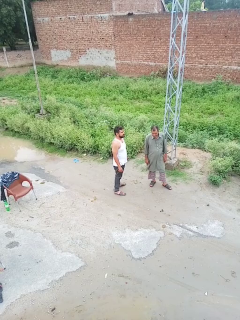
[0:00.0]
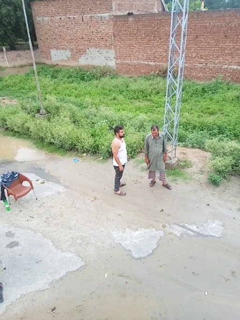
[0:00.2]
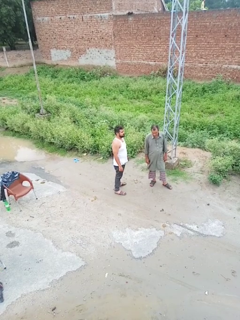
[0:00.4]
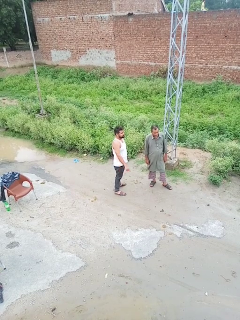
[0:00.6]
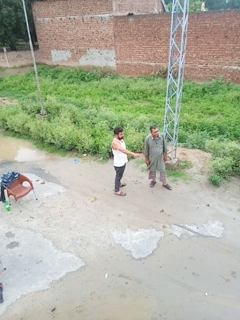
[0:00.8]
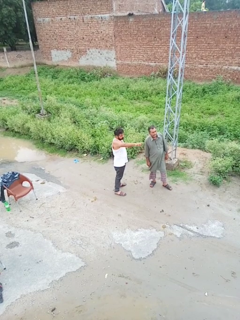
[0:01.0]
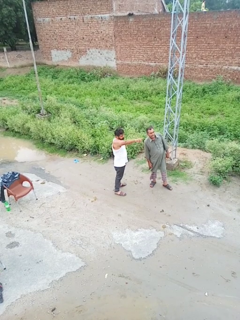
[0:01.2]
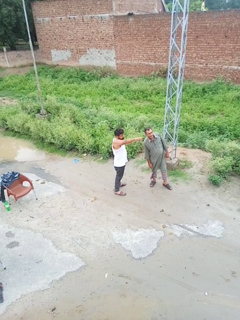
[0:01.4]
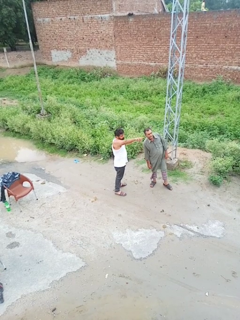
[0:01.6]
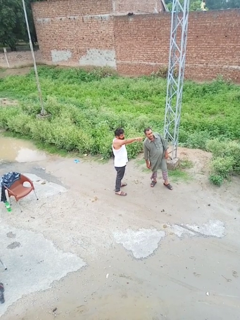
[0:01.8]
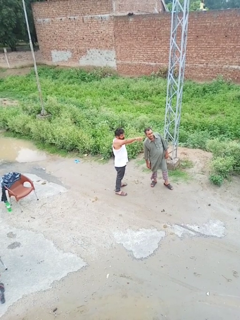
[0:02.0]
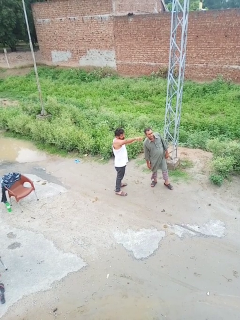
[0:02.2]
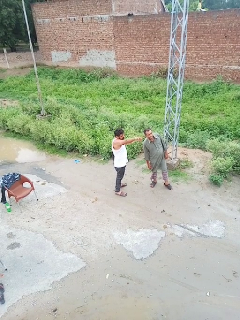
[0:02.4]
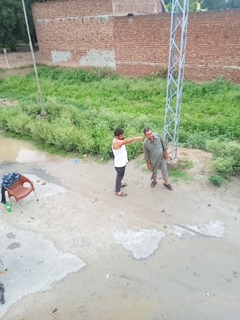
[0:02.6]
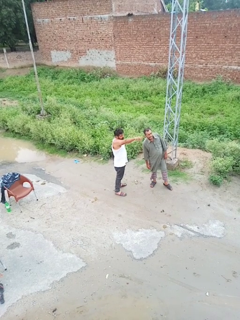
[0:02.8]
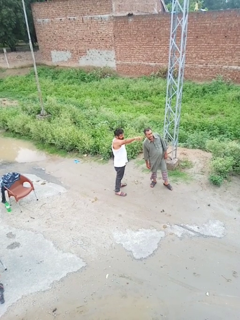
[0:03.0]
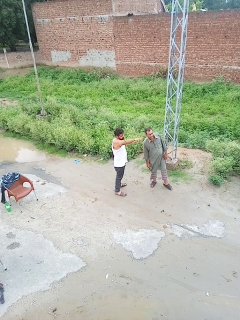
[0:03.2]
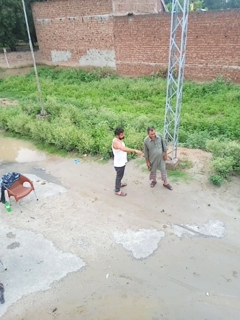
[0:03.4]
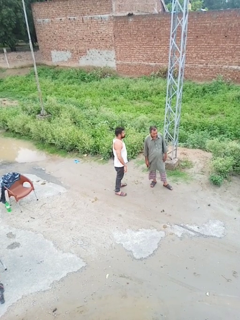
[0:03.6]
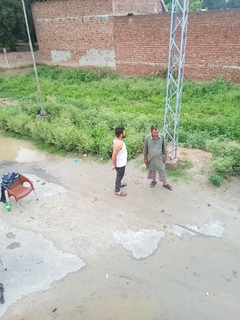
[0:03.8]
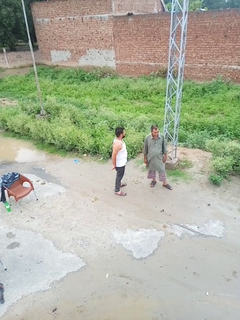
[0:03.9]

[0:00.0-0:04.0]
person points at person

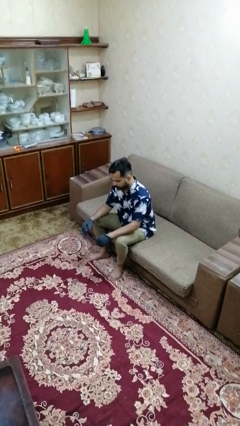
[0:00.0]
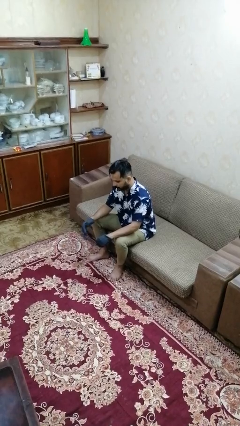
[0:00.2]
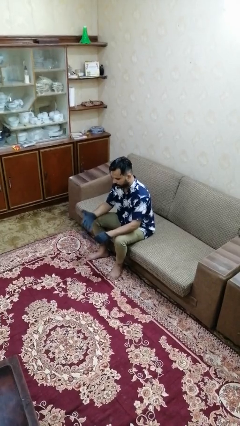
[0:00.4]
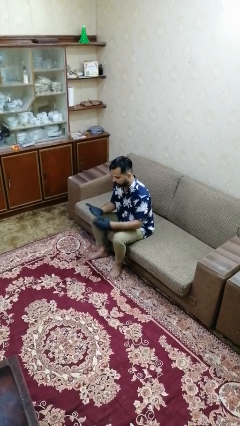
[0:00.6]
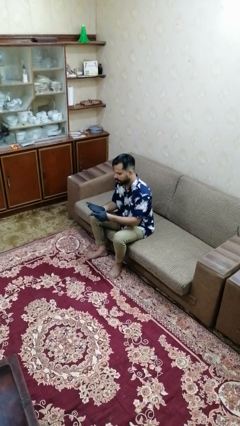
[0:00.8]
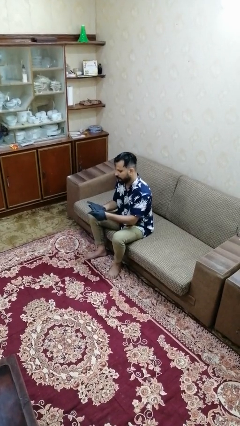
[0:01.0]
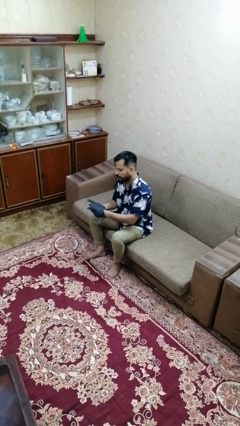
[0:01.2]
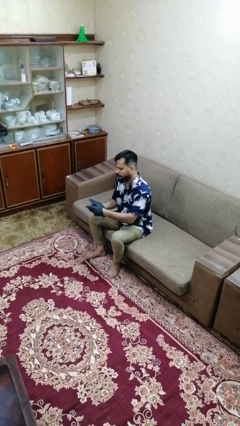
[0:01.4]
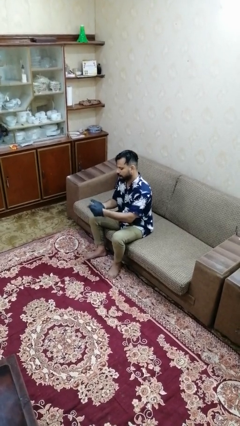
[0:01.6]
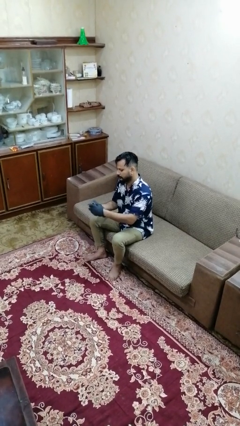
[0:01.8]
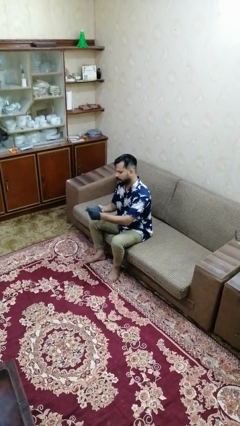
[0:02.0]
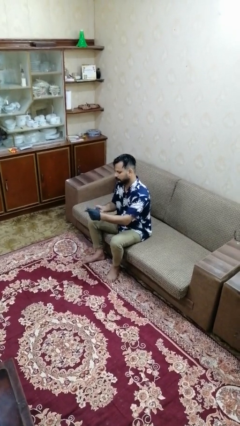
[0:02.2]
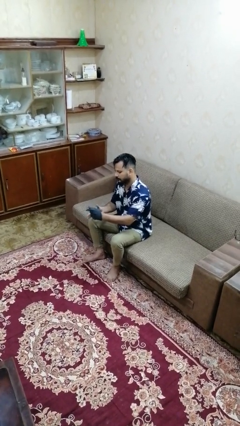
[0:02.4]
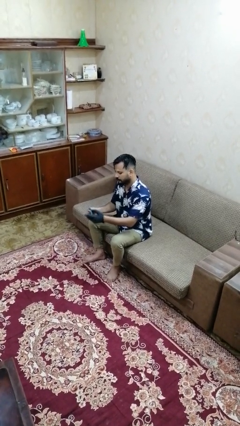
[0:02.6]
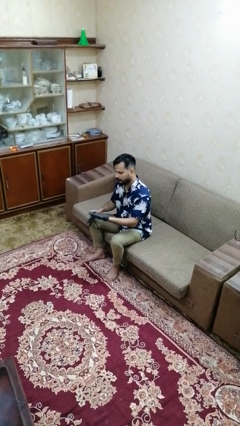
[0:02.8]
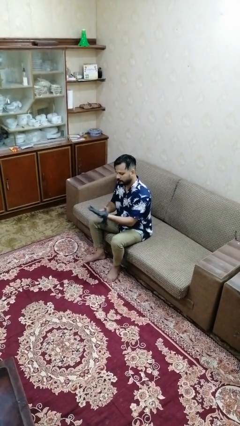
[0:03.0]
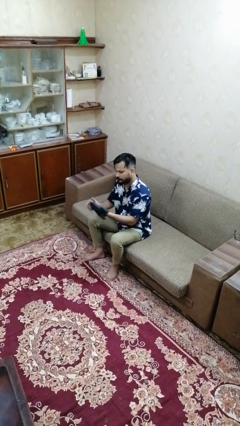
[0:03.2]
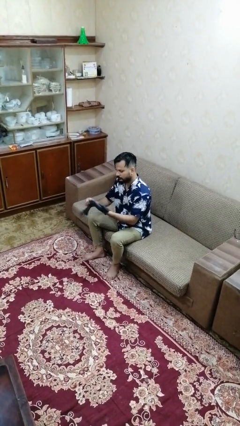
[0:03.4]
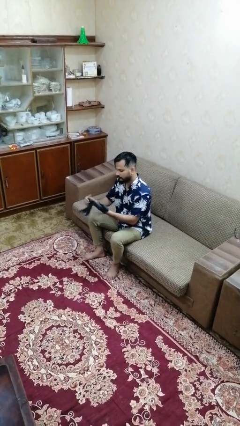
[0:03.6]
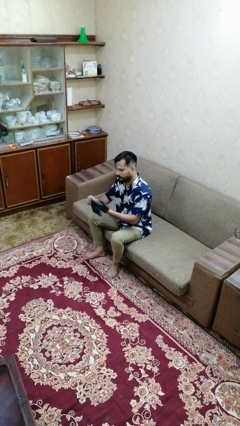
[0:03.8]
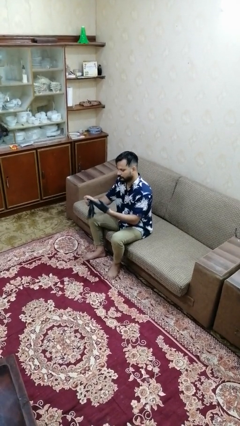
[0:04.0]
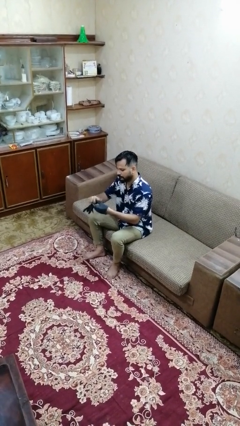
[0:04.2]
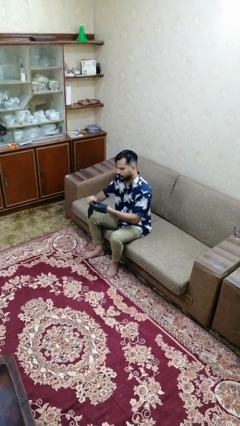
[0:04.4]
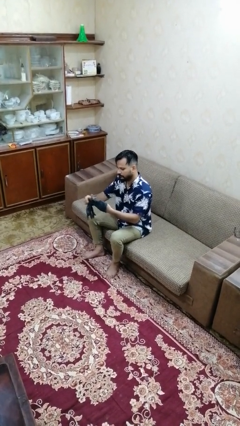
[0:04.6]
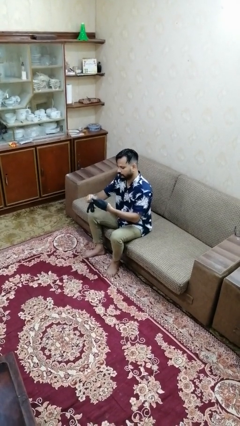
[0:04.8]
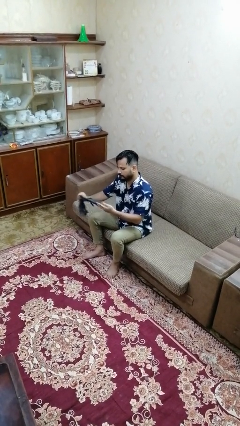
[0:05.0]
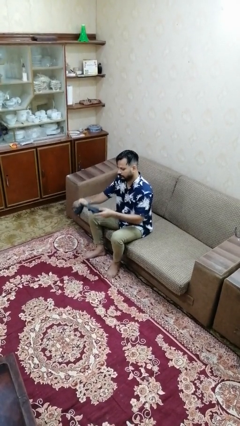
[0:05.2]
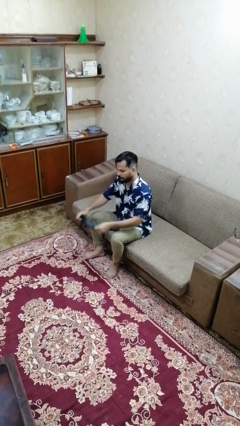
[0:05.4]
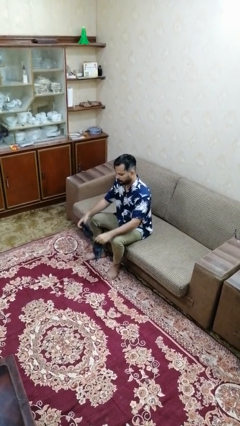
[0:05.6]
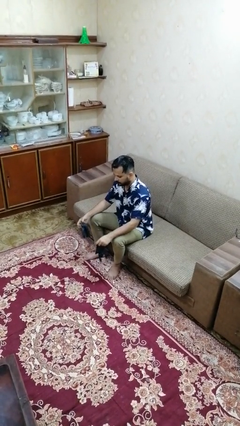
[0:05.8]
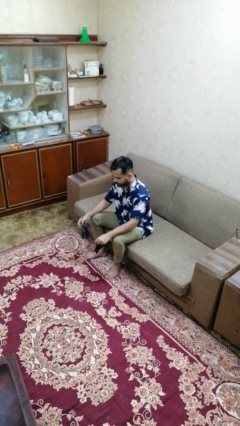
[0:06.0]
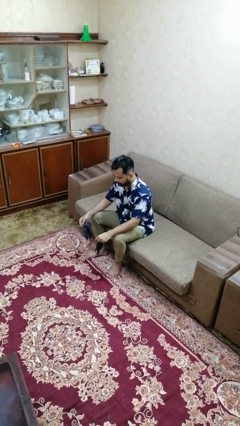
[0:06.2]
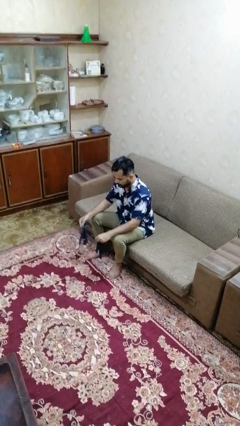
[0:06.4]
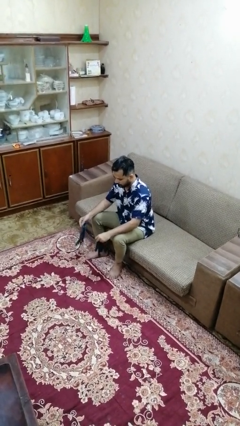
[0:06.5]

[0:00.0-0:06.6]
person takes off gloves

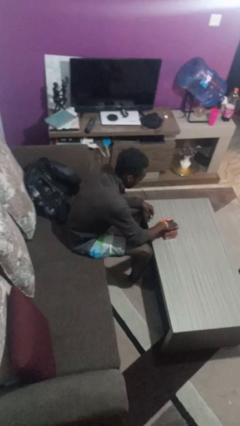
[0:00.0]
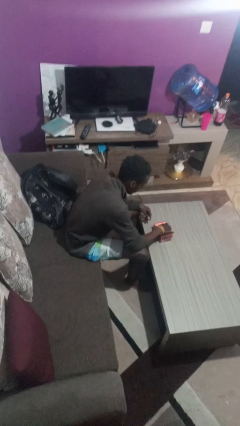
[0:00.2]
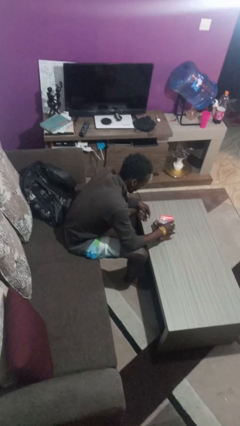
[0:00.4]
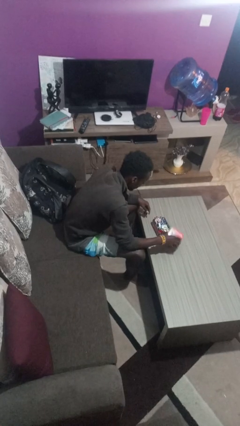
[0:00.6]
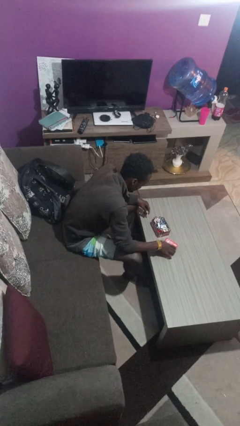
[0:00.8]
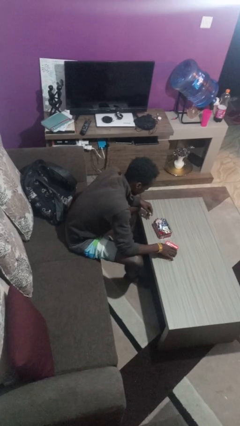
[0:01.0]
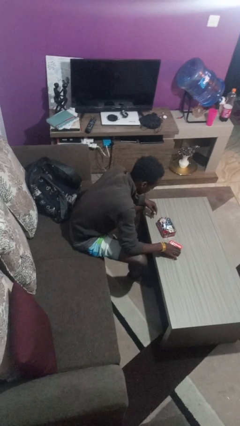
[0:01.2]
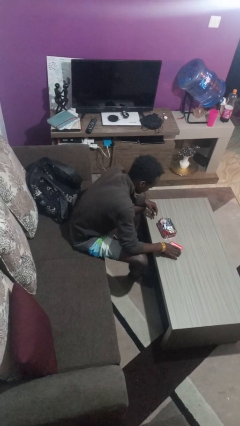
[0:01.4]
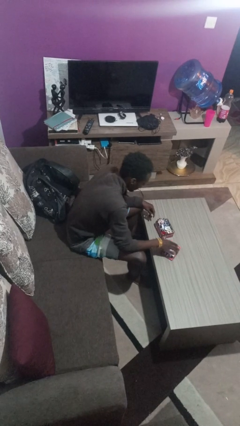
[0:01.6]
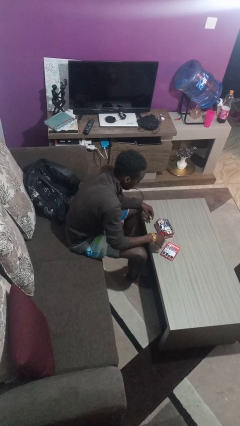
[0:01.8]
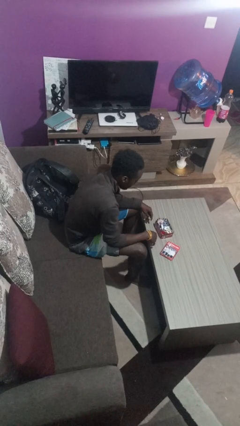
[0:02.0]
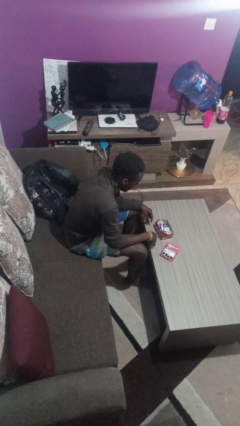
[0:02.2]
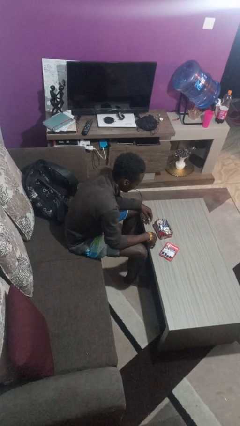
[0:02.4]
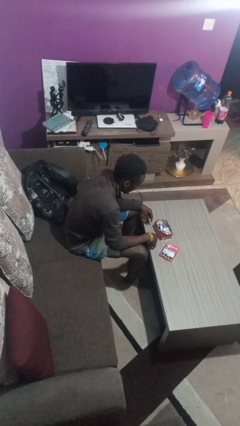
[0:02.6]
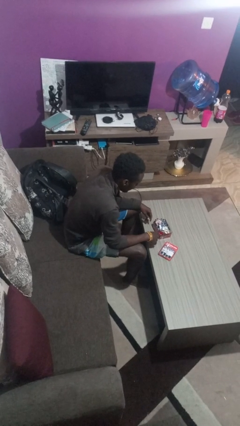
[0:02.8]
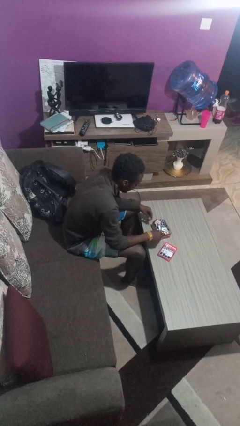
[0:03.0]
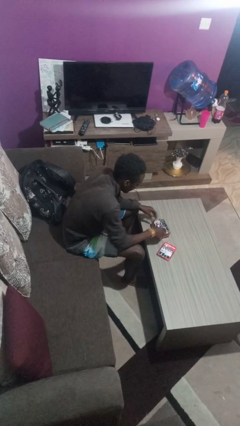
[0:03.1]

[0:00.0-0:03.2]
person opens jewelry box

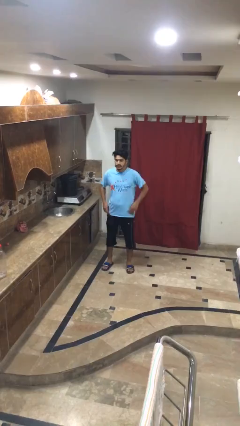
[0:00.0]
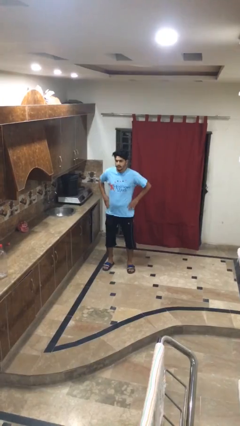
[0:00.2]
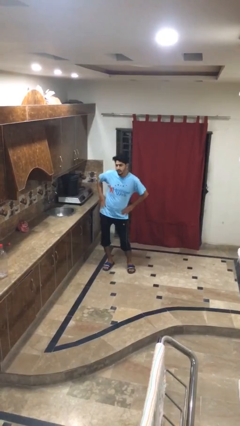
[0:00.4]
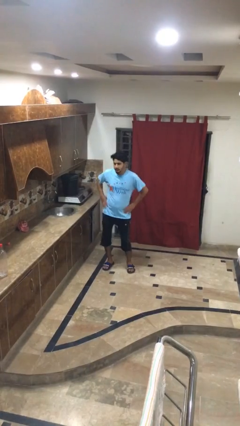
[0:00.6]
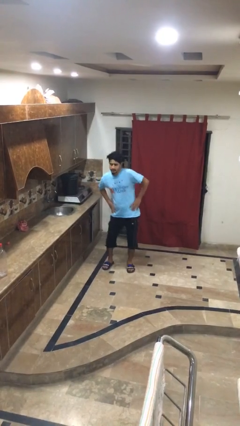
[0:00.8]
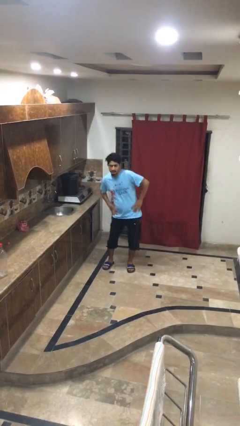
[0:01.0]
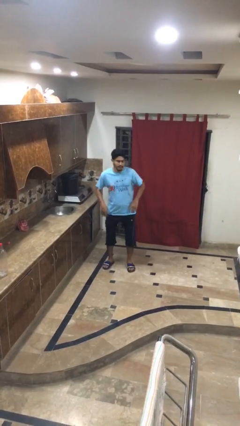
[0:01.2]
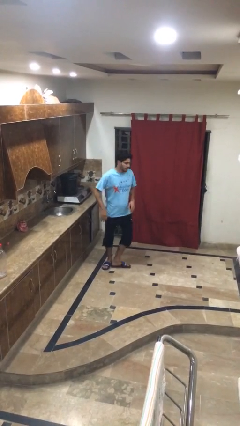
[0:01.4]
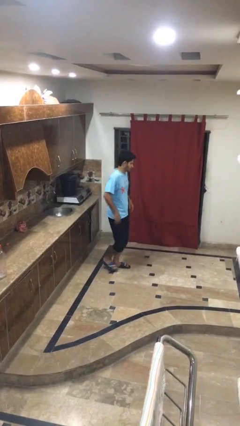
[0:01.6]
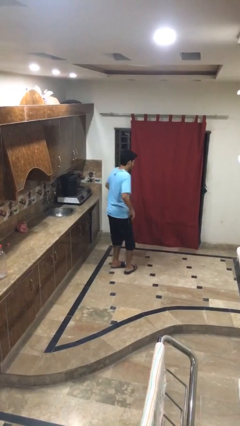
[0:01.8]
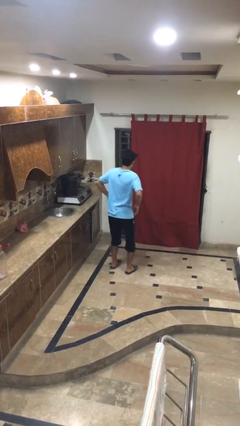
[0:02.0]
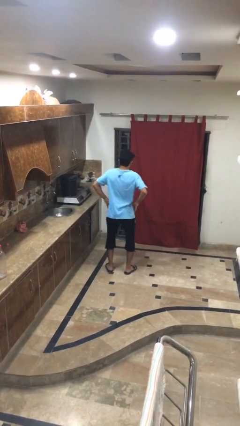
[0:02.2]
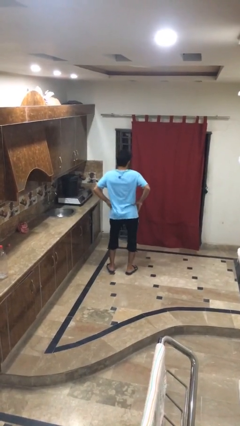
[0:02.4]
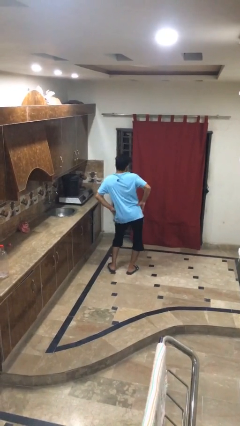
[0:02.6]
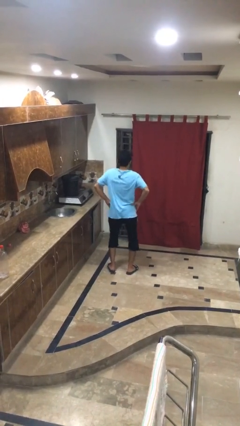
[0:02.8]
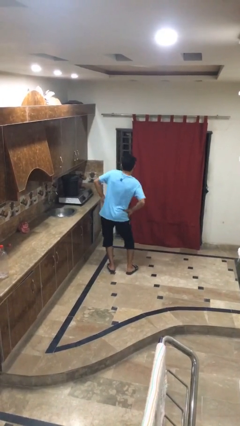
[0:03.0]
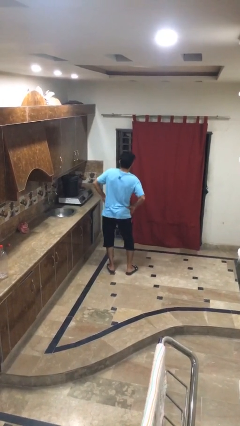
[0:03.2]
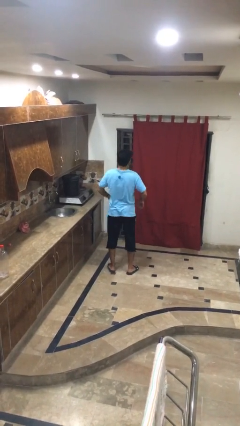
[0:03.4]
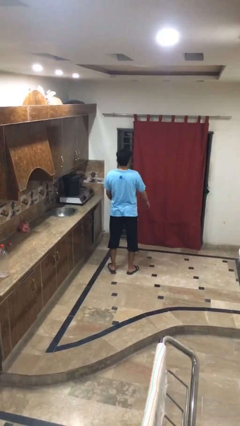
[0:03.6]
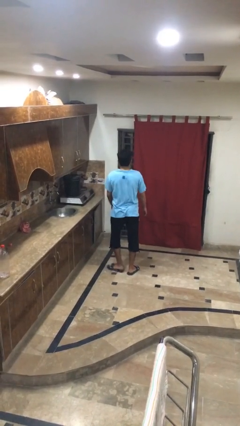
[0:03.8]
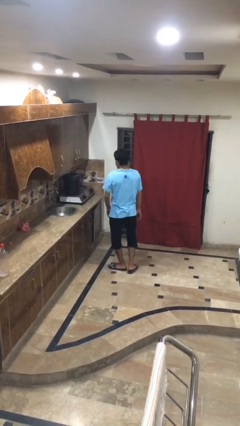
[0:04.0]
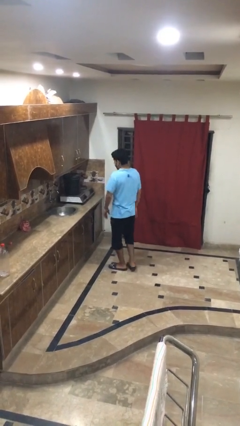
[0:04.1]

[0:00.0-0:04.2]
person wiggles hips

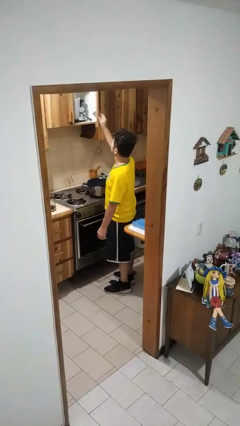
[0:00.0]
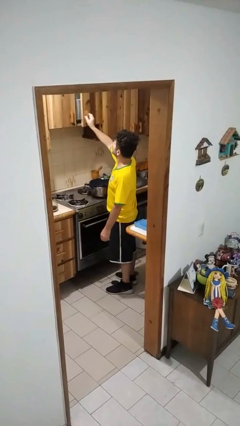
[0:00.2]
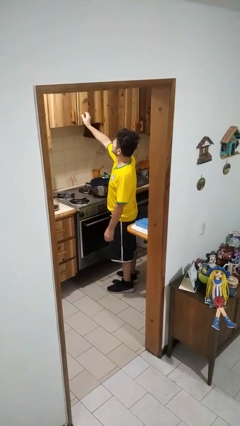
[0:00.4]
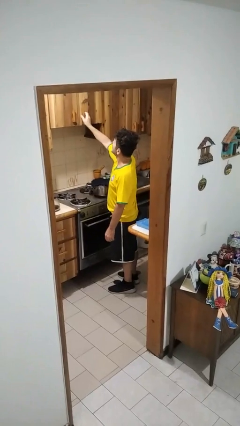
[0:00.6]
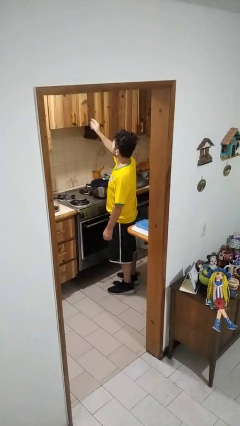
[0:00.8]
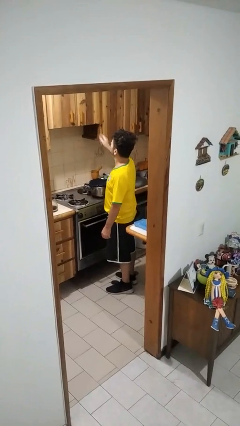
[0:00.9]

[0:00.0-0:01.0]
person closes cabinet
